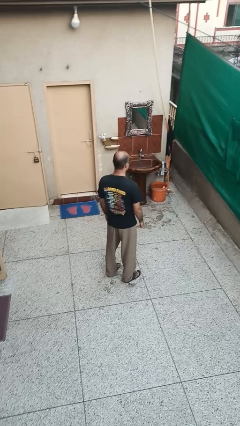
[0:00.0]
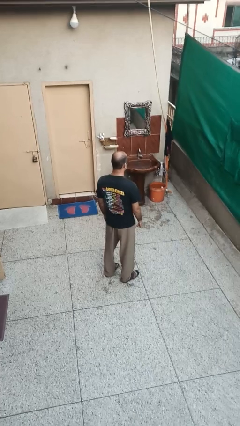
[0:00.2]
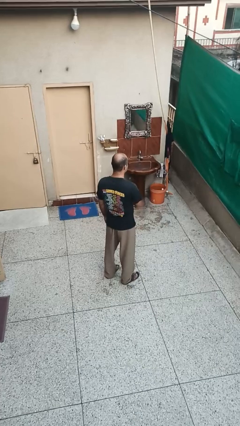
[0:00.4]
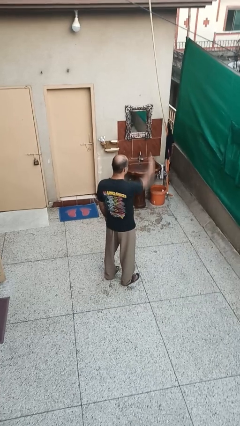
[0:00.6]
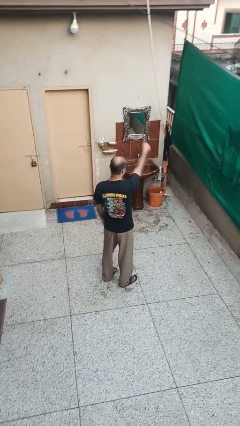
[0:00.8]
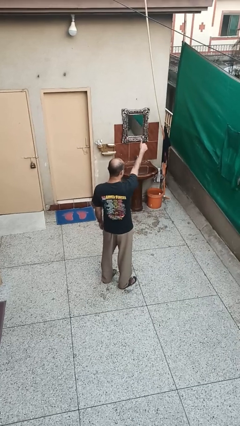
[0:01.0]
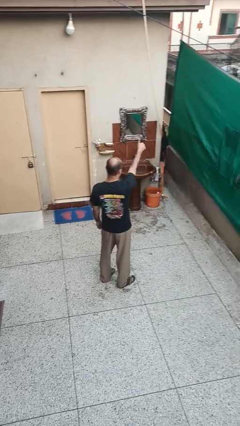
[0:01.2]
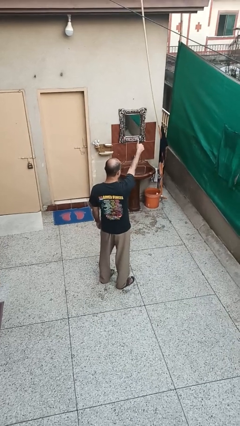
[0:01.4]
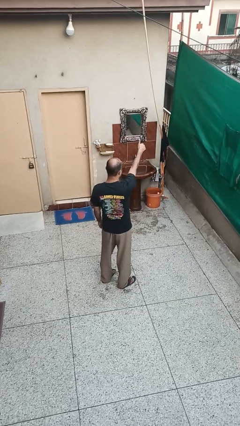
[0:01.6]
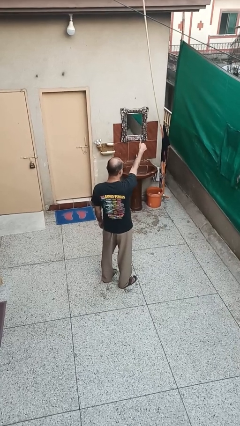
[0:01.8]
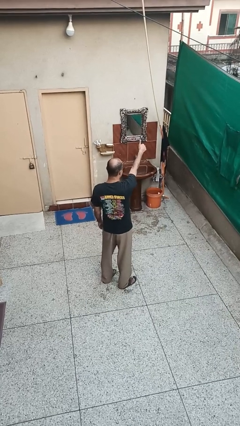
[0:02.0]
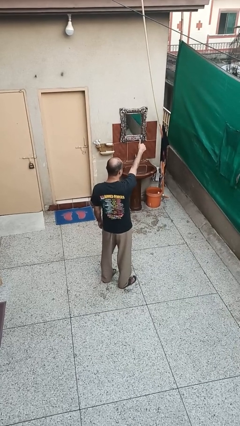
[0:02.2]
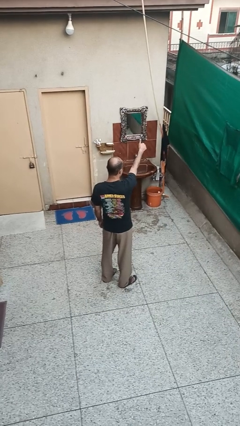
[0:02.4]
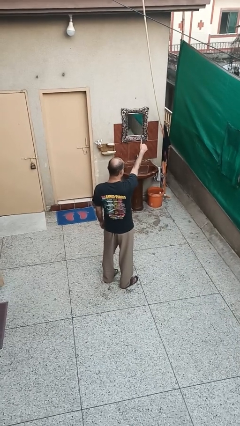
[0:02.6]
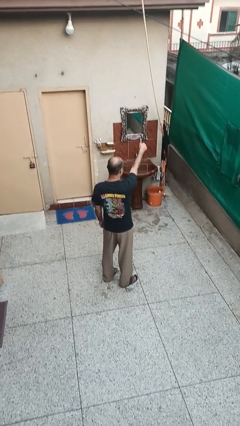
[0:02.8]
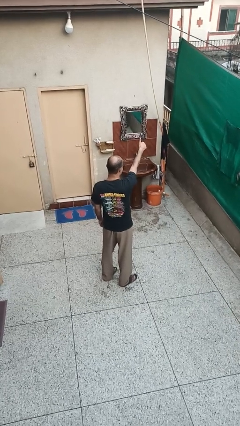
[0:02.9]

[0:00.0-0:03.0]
person gestures thumbs up

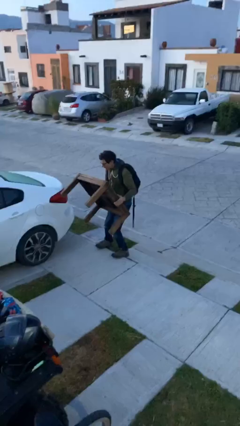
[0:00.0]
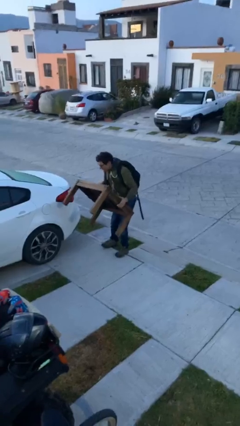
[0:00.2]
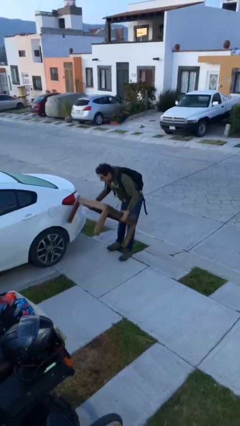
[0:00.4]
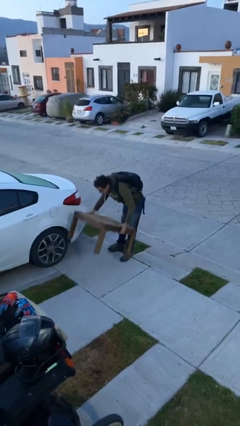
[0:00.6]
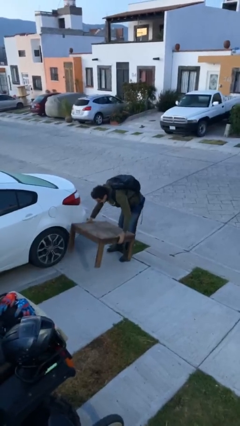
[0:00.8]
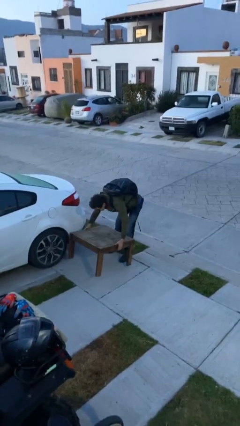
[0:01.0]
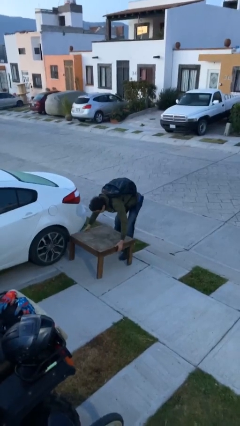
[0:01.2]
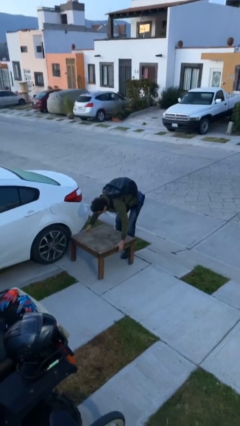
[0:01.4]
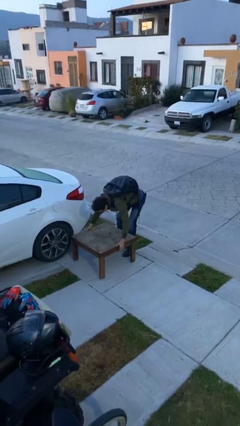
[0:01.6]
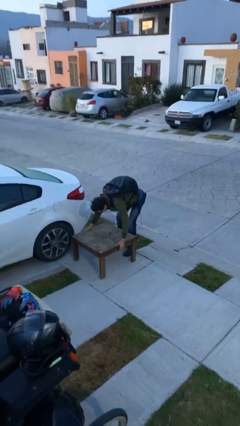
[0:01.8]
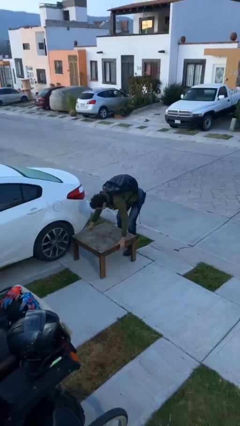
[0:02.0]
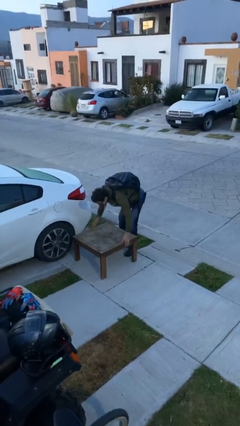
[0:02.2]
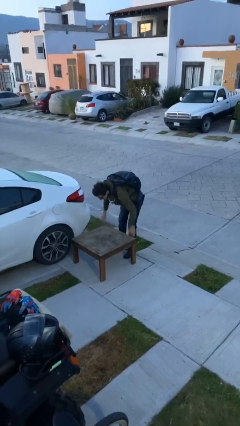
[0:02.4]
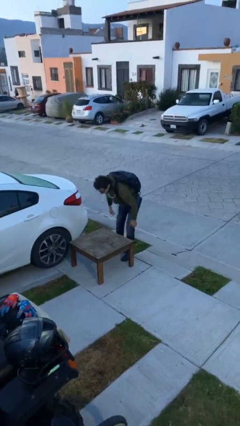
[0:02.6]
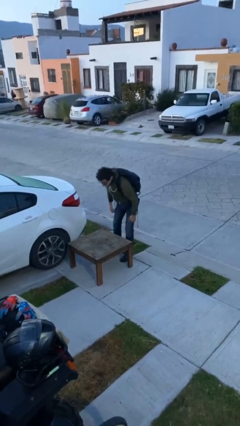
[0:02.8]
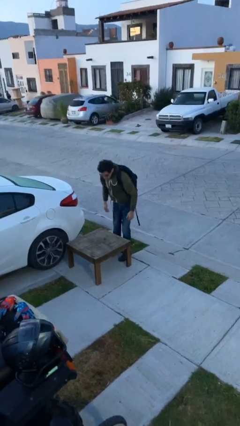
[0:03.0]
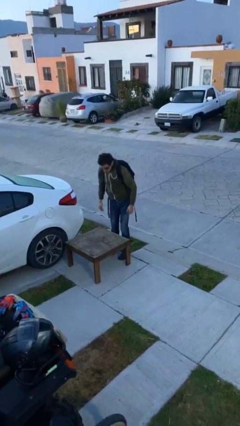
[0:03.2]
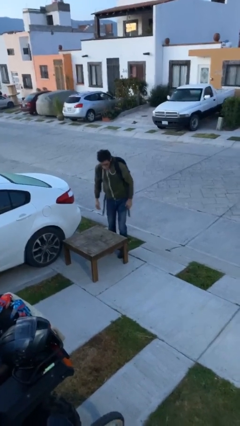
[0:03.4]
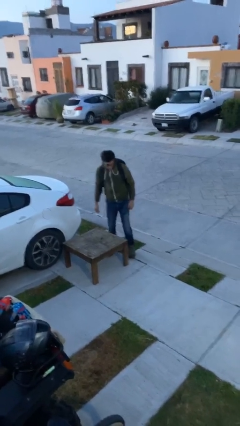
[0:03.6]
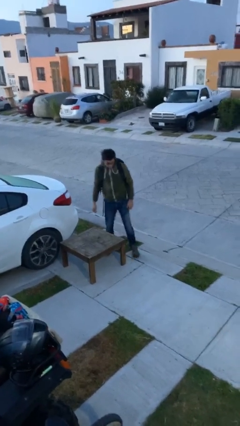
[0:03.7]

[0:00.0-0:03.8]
person puts down object on floor

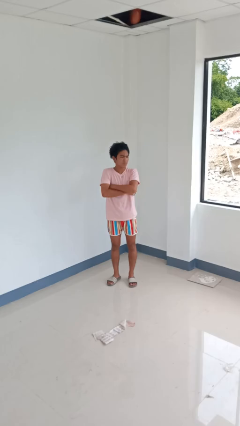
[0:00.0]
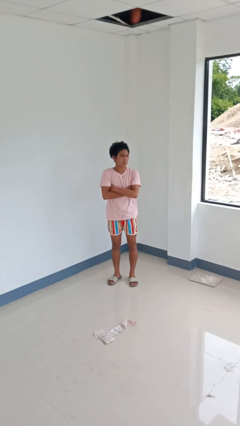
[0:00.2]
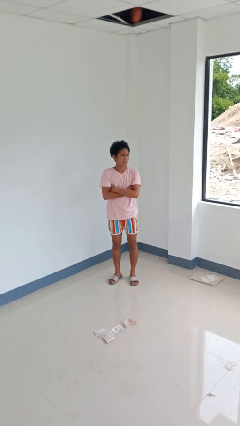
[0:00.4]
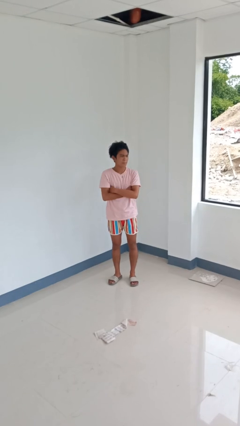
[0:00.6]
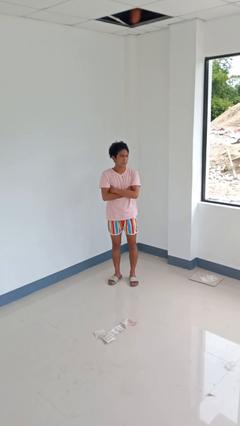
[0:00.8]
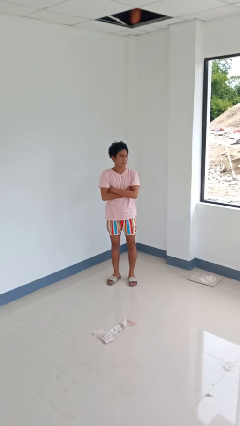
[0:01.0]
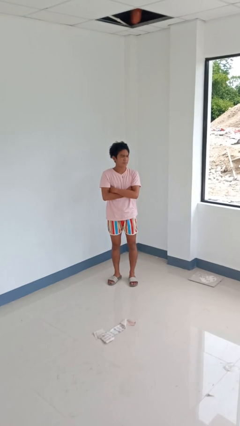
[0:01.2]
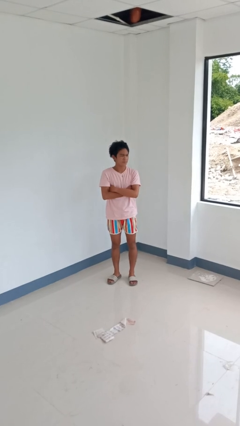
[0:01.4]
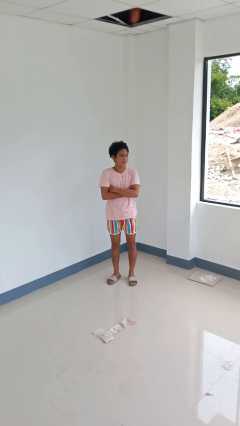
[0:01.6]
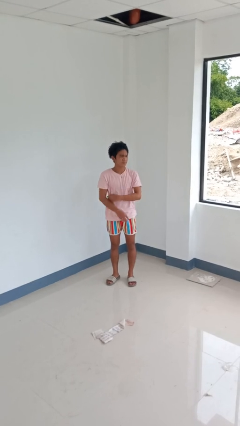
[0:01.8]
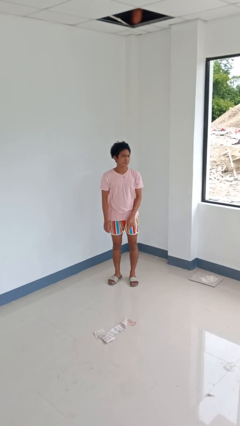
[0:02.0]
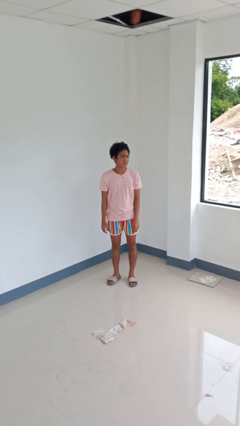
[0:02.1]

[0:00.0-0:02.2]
person crosses arms

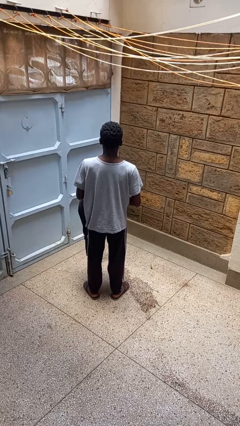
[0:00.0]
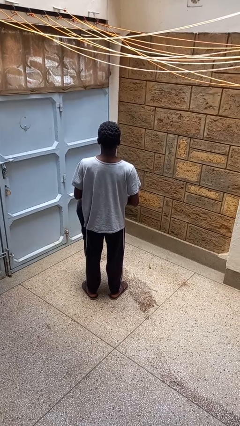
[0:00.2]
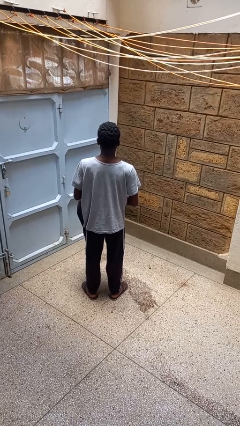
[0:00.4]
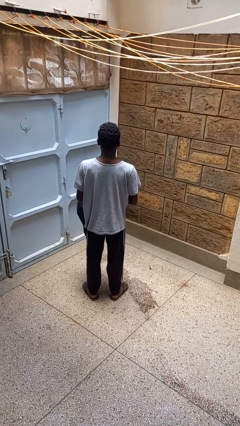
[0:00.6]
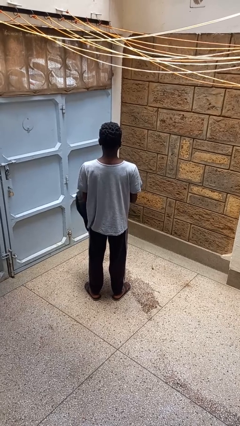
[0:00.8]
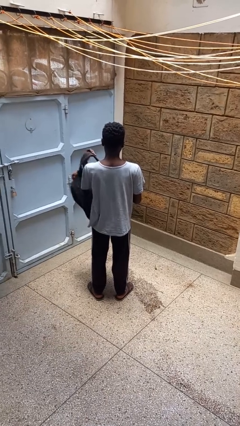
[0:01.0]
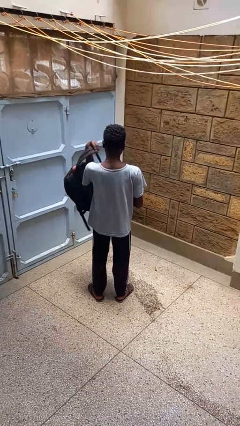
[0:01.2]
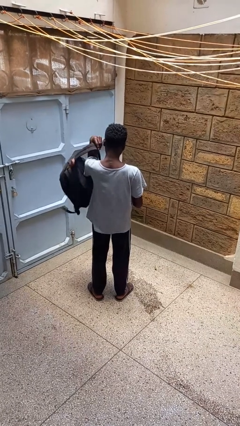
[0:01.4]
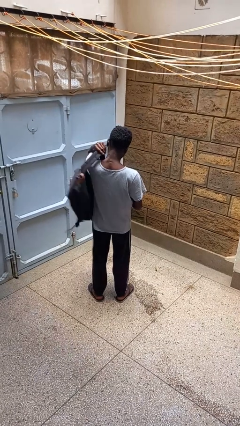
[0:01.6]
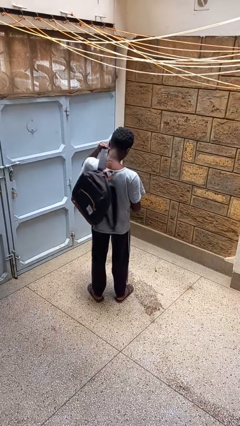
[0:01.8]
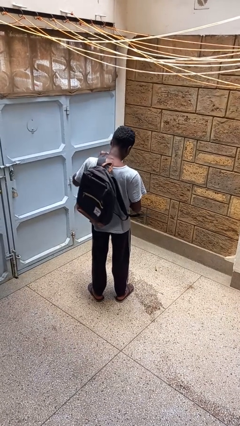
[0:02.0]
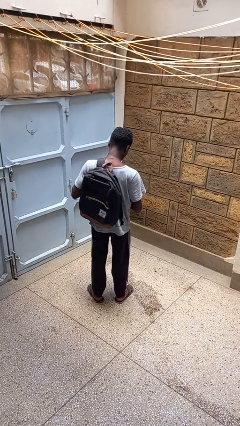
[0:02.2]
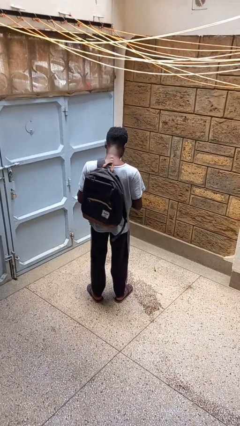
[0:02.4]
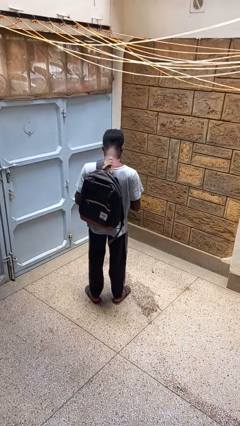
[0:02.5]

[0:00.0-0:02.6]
person puts on backpack

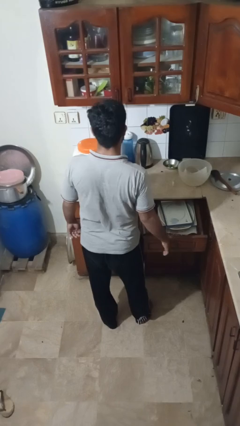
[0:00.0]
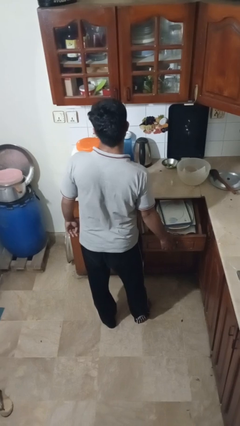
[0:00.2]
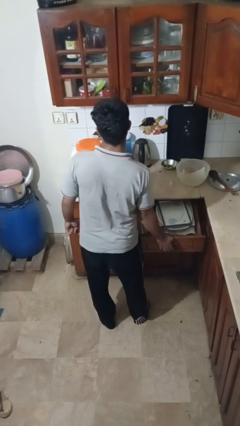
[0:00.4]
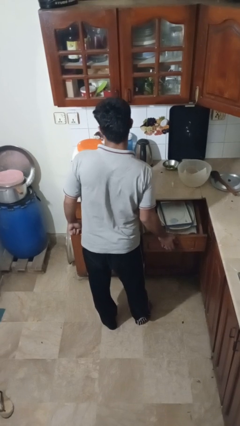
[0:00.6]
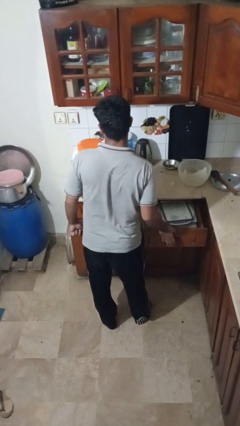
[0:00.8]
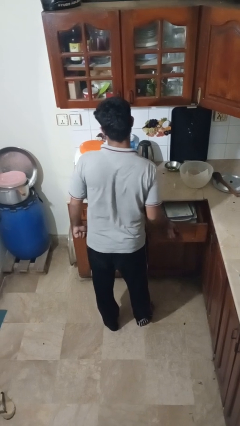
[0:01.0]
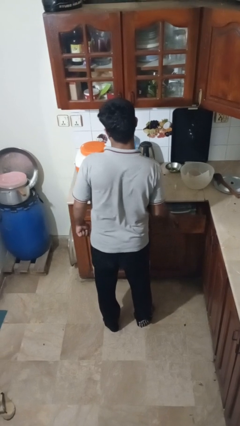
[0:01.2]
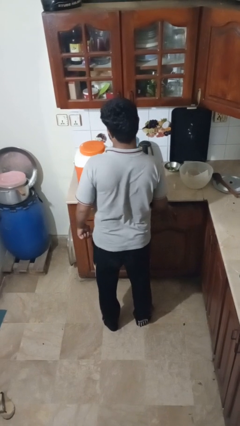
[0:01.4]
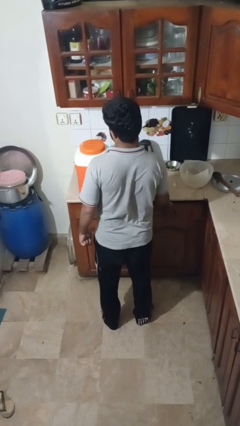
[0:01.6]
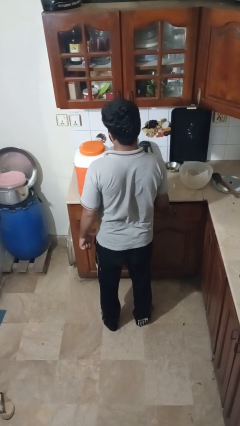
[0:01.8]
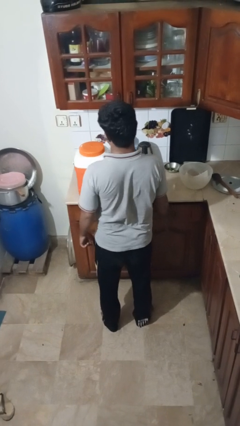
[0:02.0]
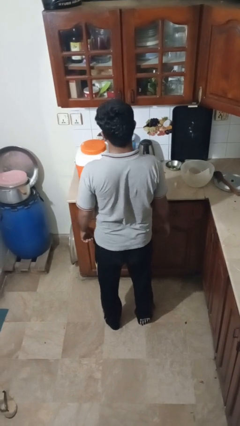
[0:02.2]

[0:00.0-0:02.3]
person closes kitchen drawer

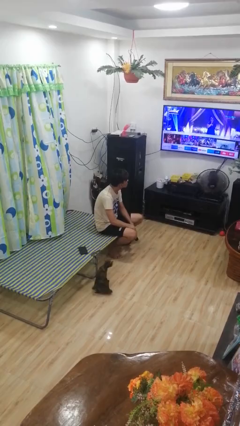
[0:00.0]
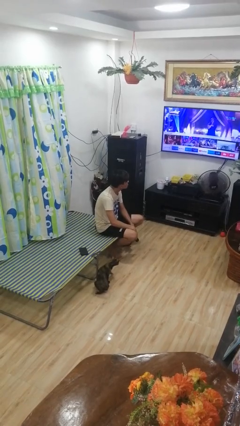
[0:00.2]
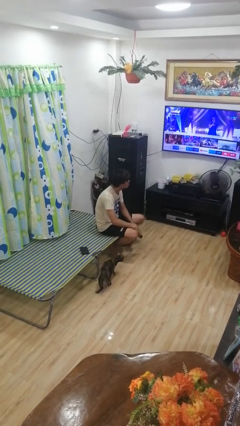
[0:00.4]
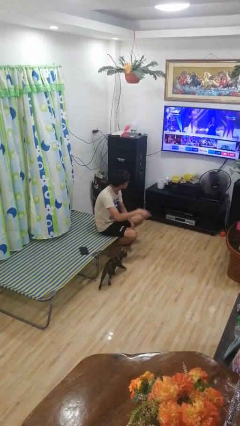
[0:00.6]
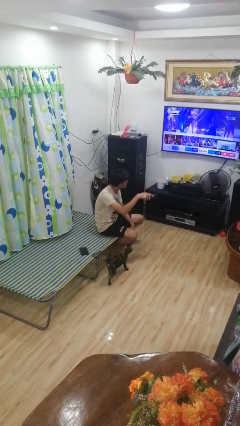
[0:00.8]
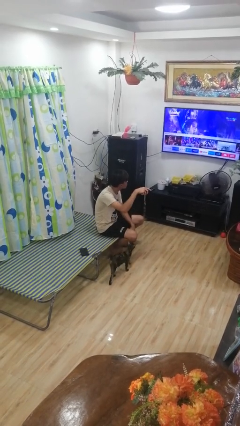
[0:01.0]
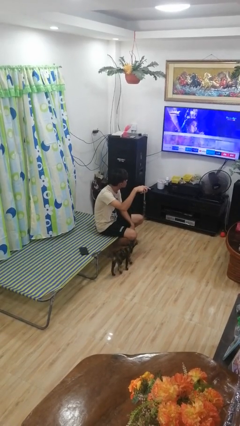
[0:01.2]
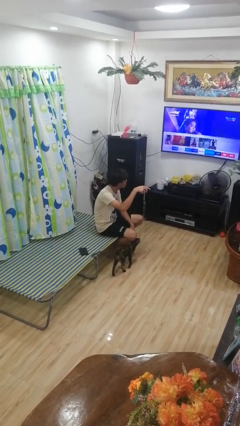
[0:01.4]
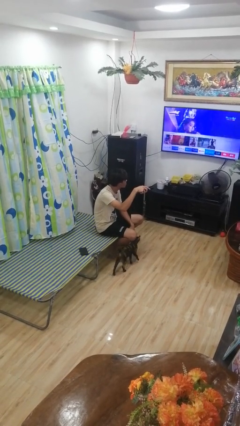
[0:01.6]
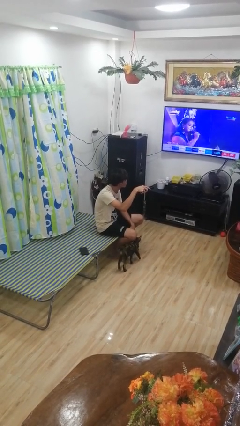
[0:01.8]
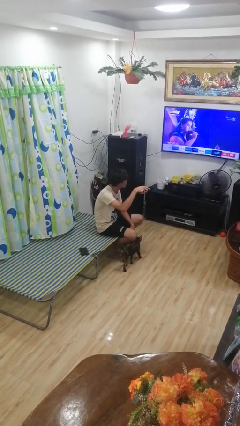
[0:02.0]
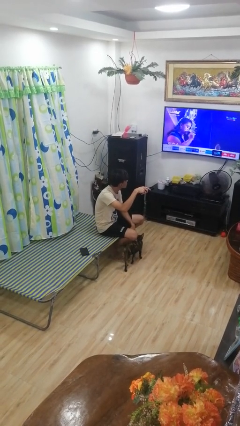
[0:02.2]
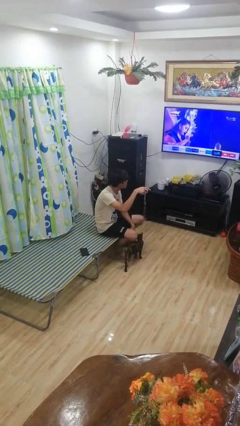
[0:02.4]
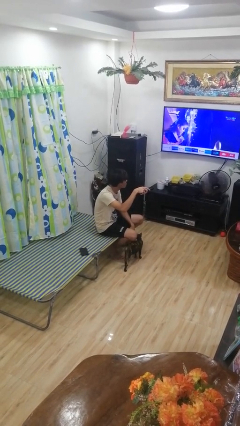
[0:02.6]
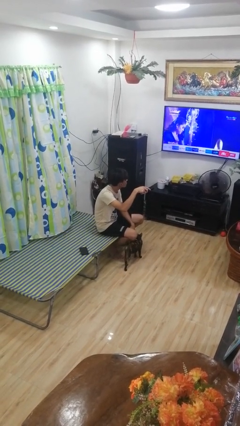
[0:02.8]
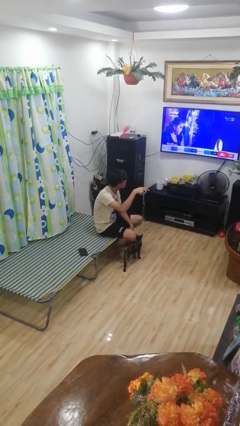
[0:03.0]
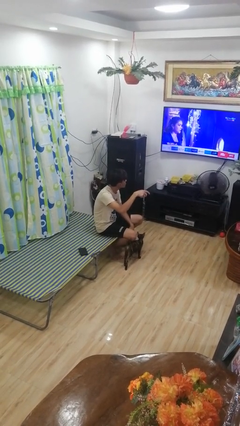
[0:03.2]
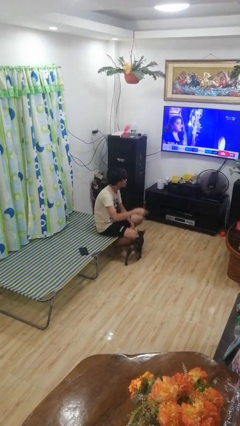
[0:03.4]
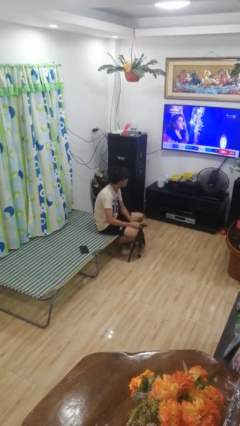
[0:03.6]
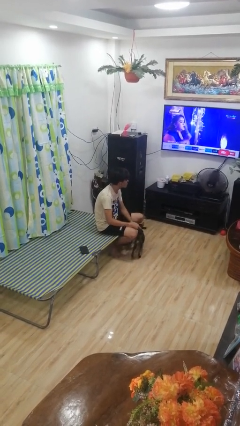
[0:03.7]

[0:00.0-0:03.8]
person uses television remote
